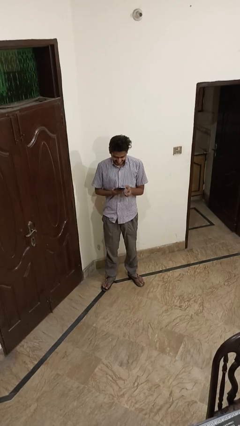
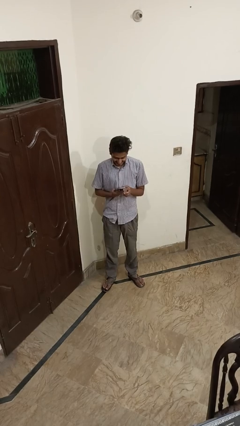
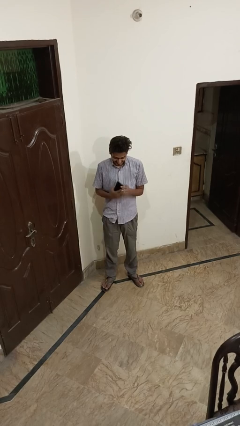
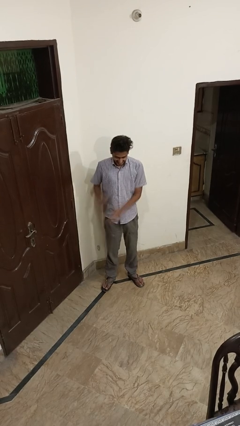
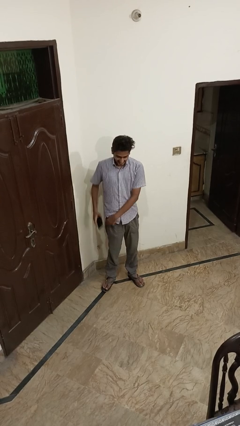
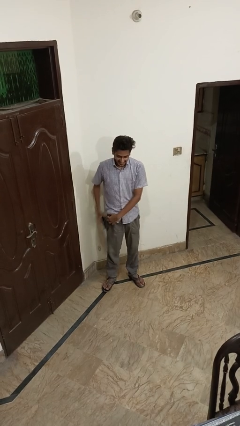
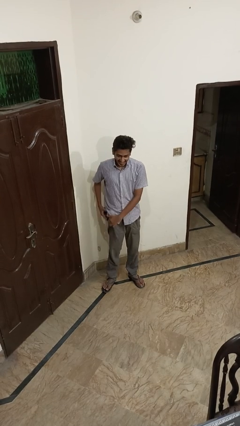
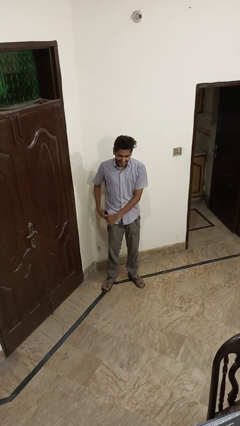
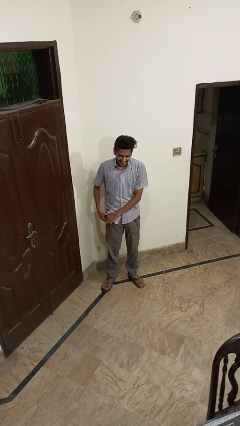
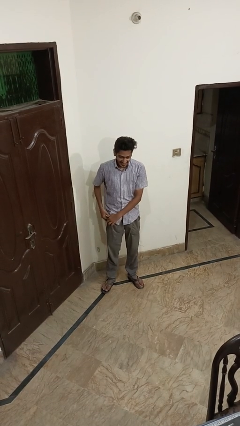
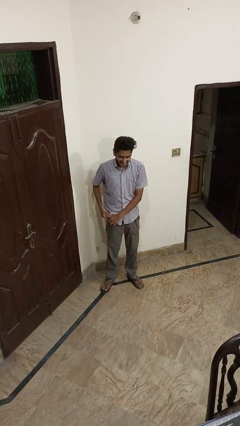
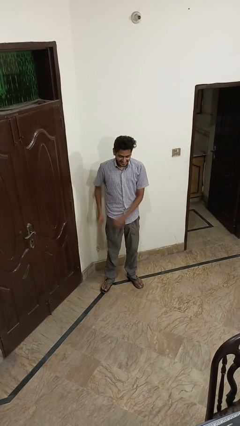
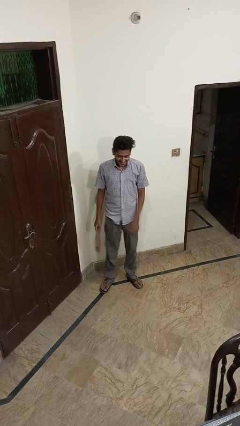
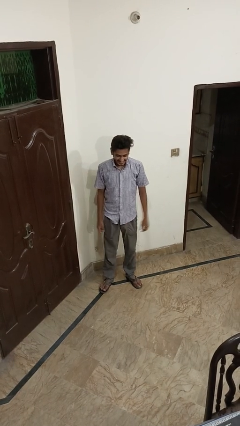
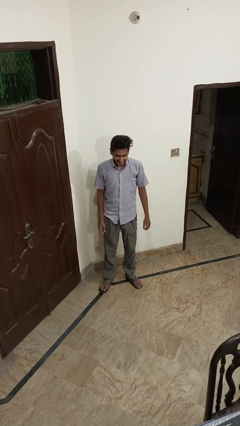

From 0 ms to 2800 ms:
person puts phone into pocket

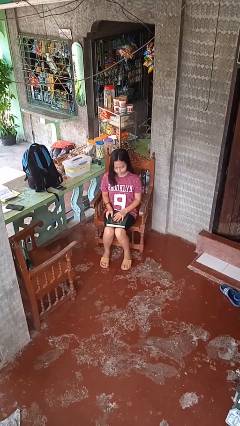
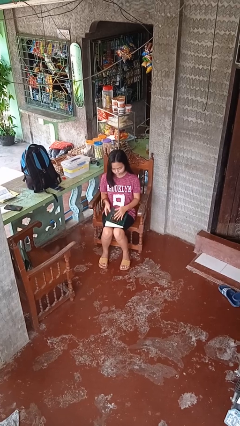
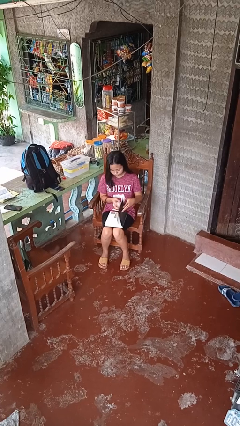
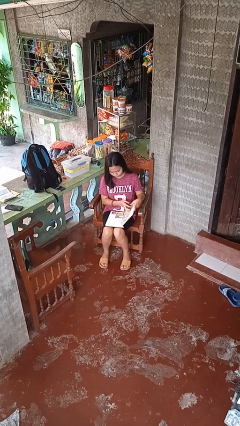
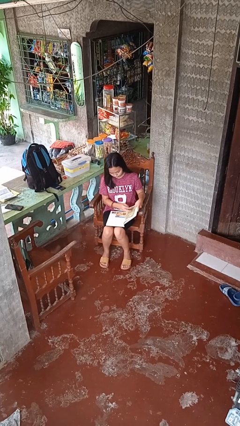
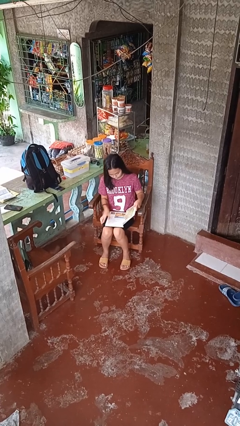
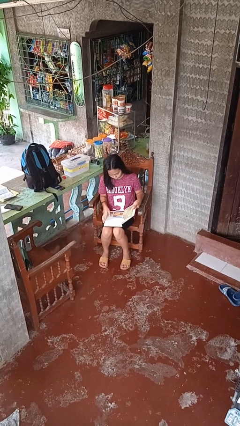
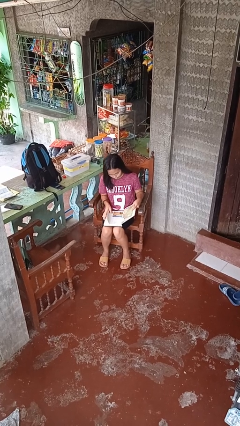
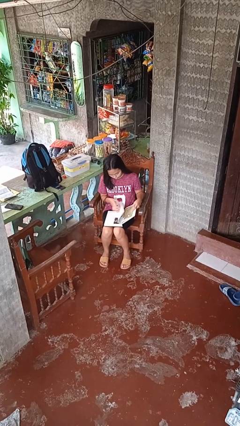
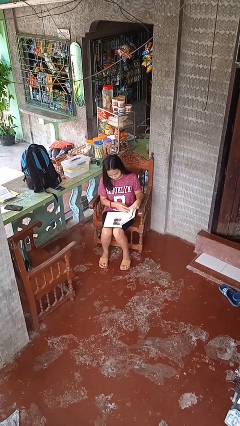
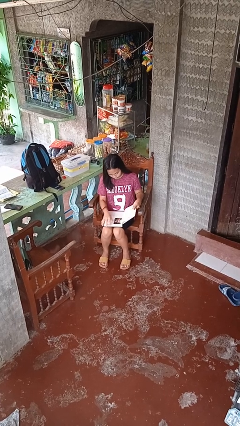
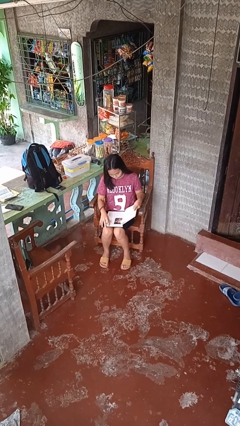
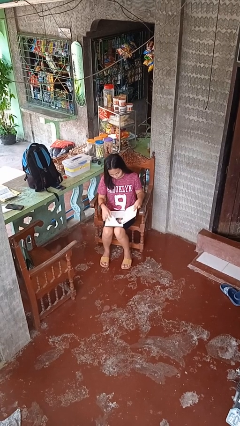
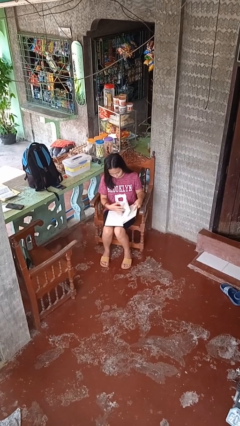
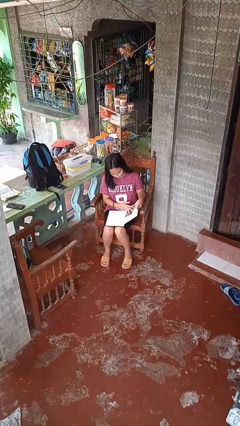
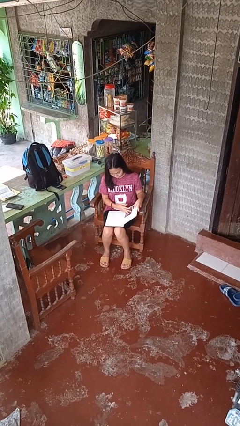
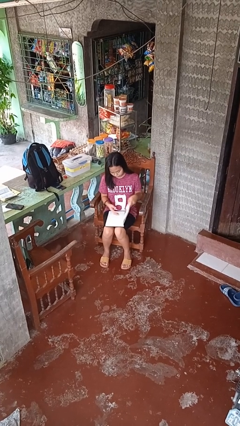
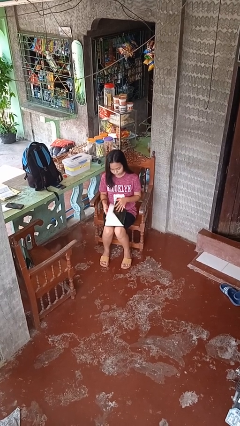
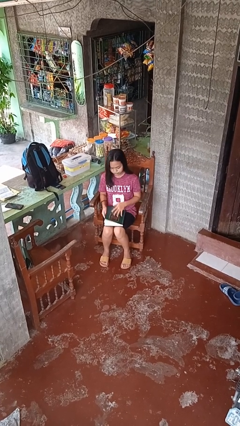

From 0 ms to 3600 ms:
person reads book

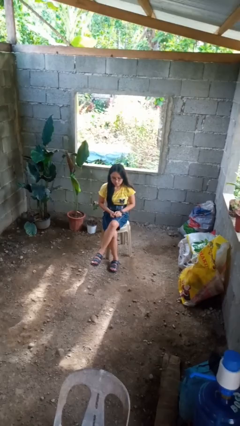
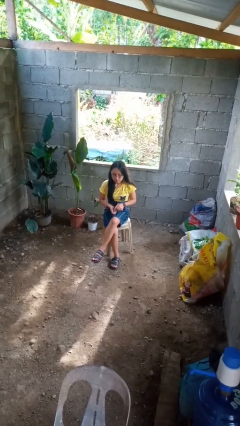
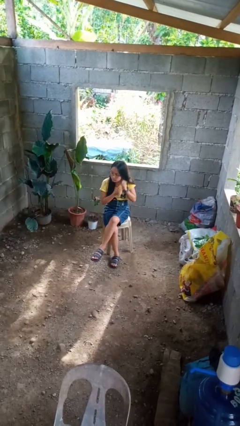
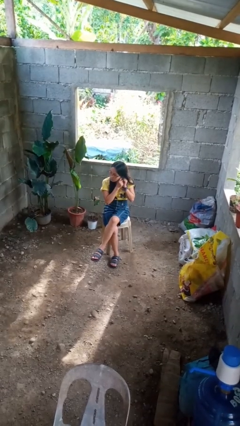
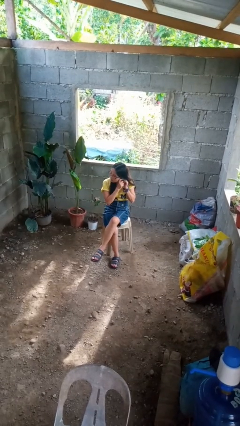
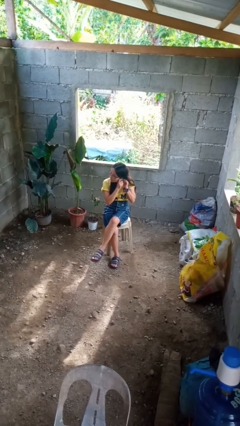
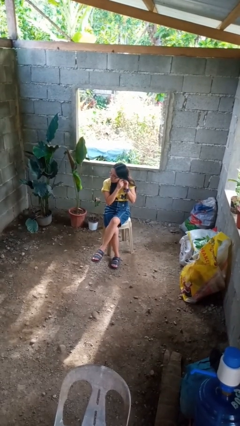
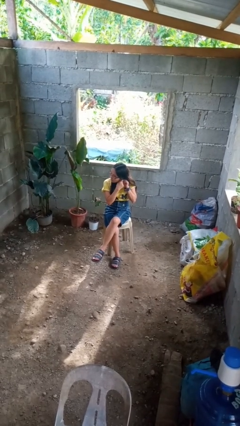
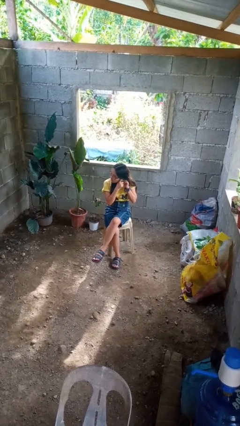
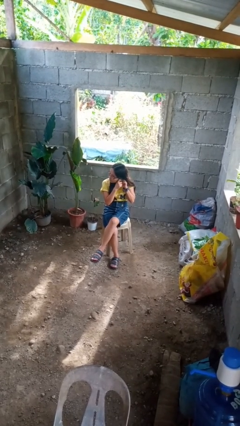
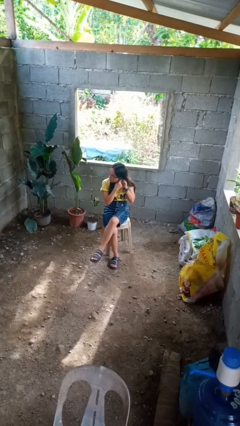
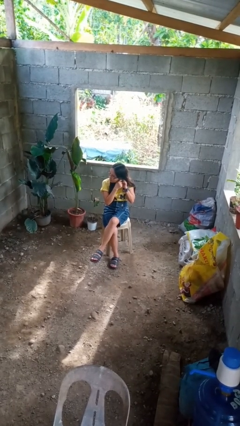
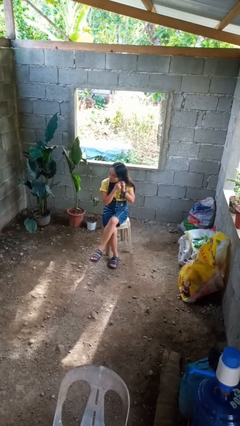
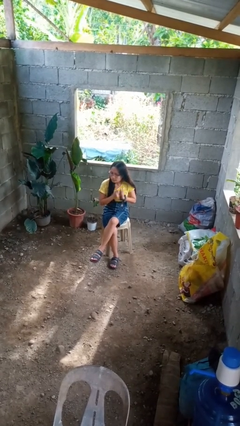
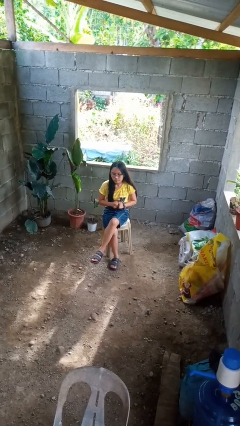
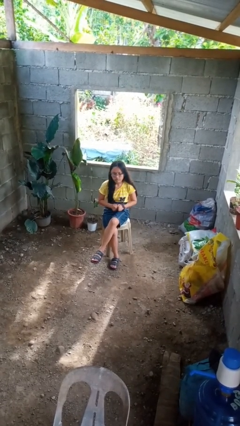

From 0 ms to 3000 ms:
person takes off earrings

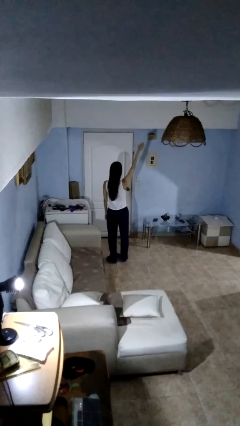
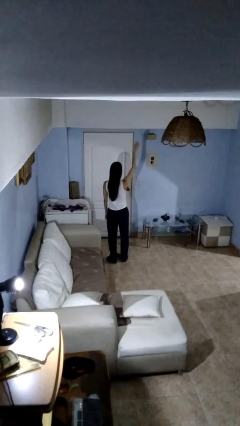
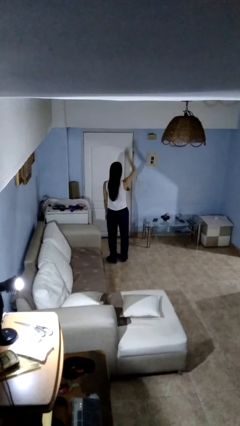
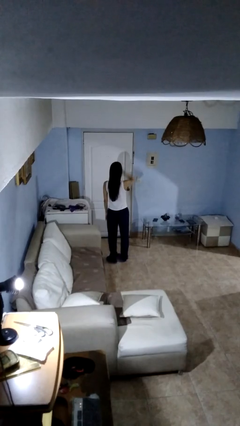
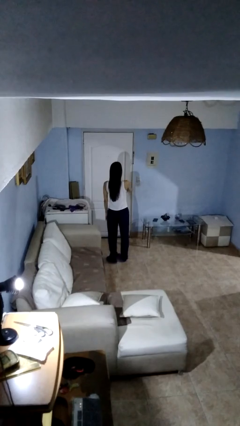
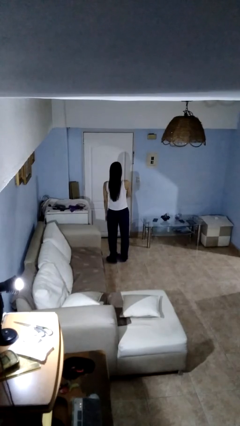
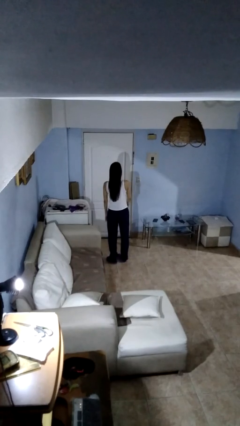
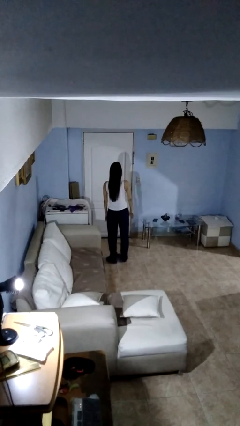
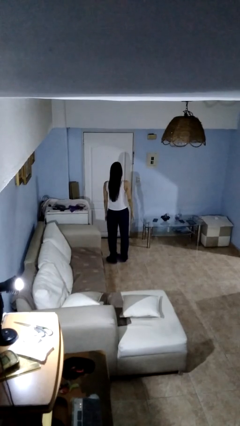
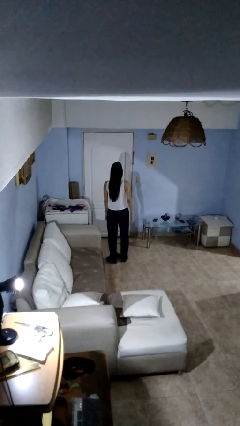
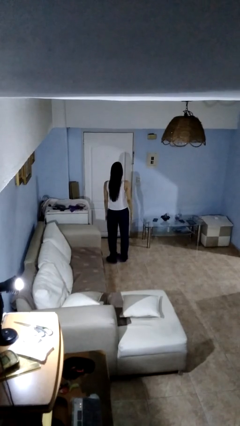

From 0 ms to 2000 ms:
person gestures swipe down

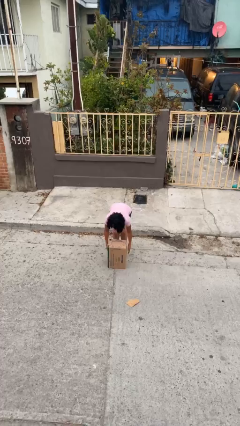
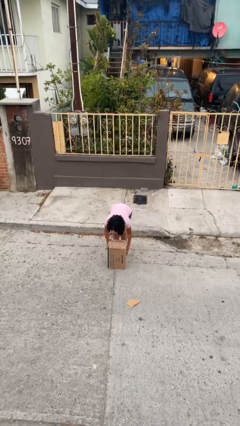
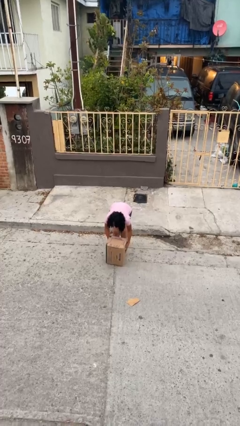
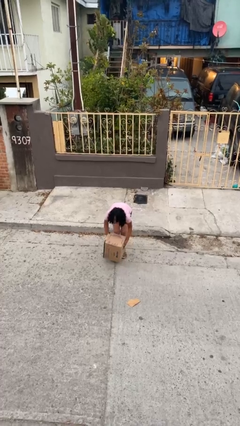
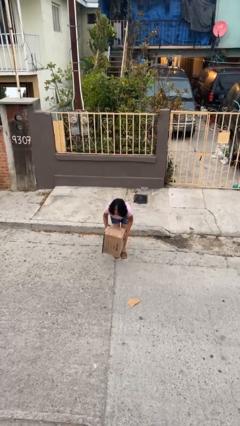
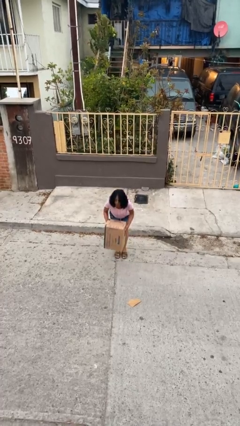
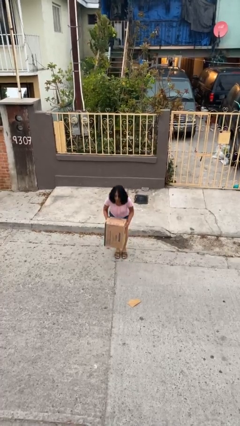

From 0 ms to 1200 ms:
person picks up object from floor

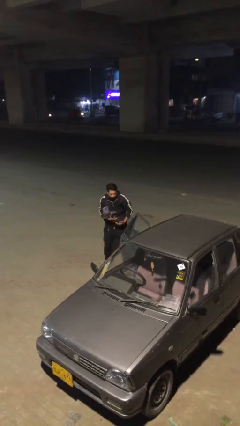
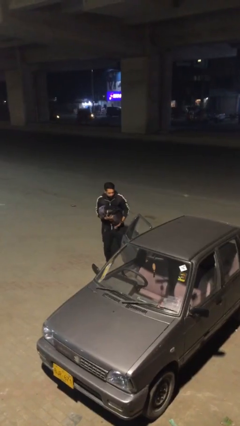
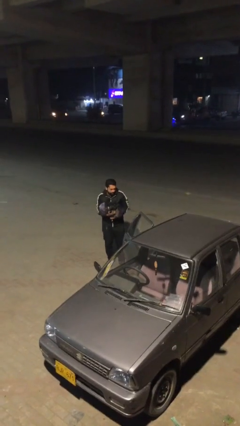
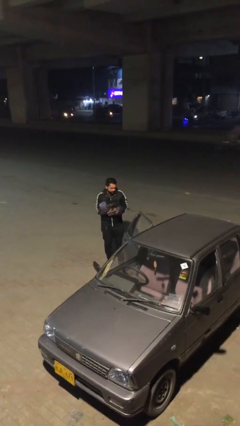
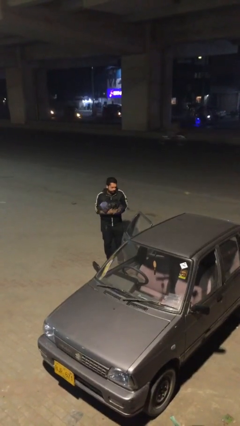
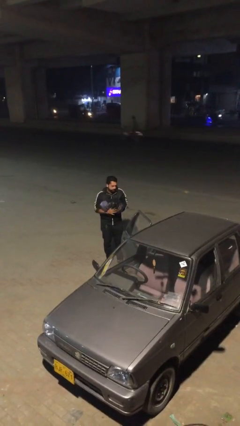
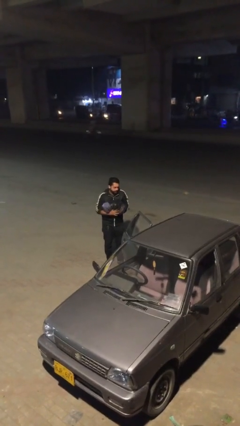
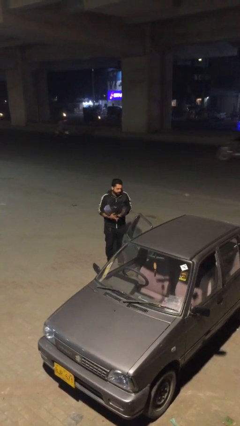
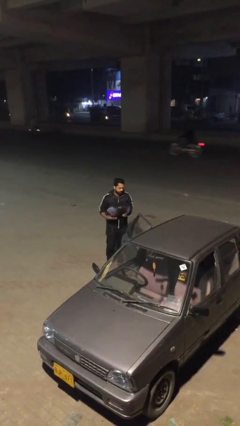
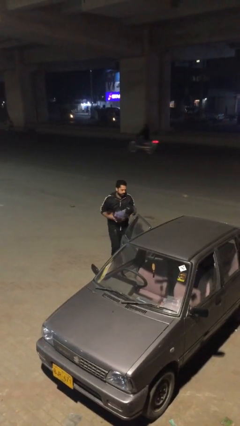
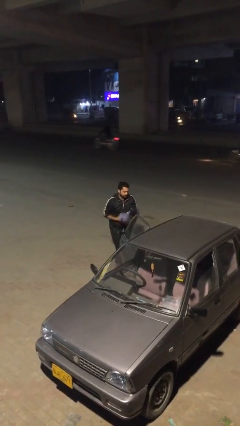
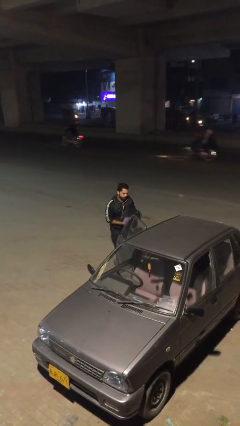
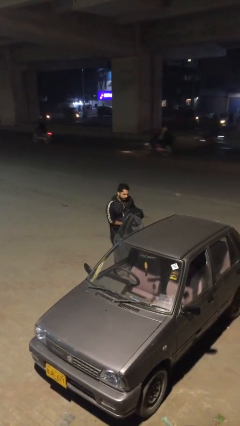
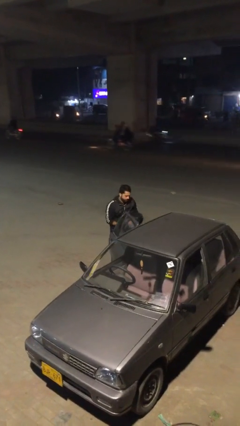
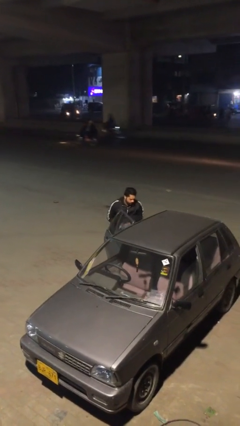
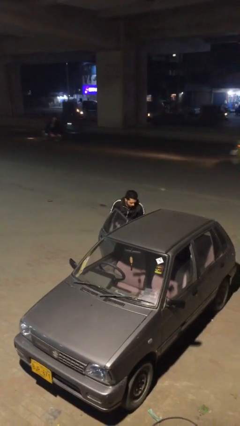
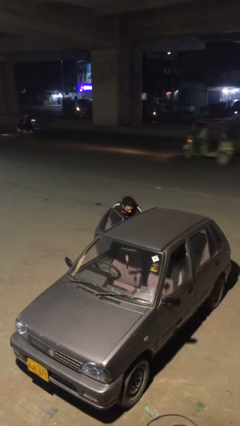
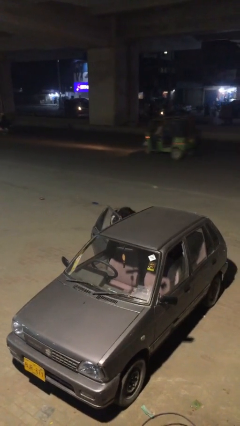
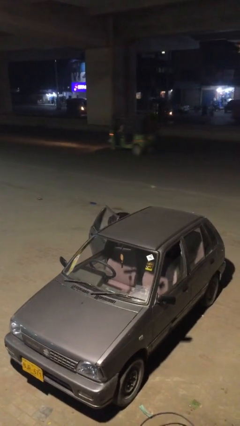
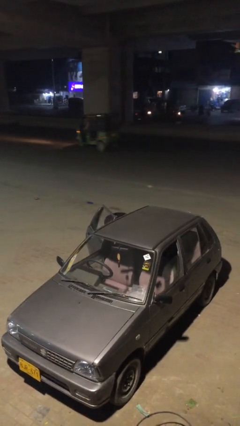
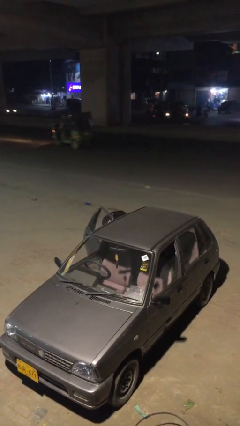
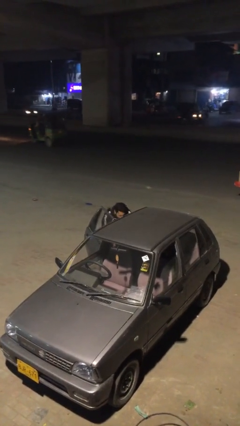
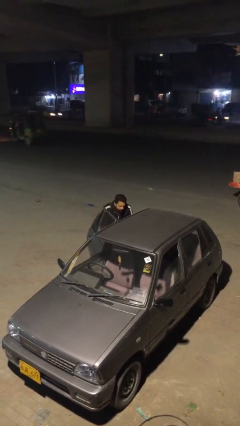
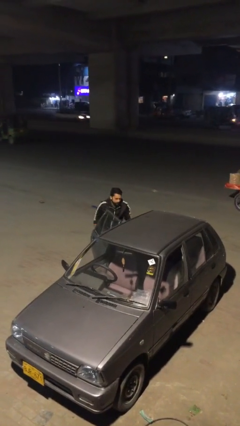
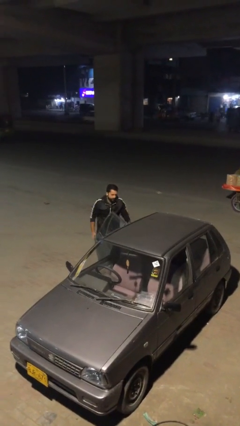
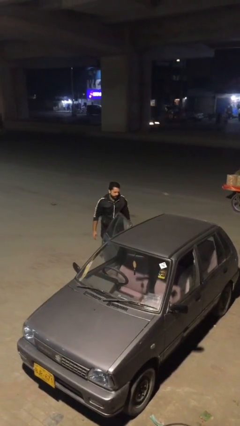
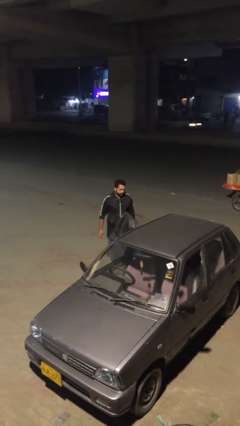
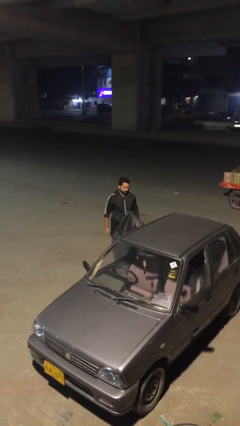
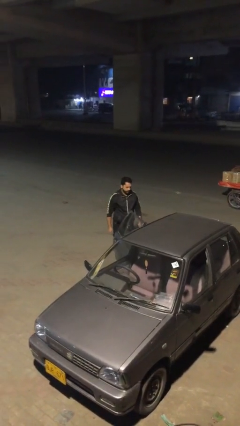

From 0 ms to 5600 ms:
person loads car
